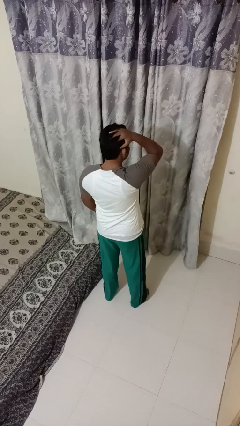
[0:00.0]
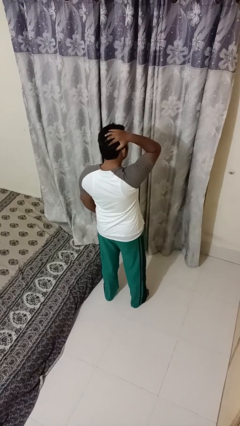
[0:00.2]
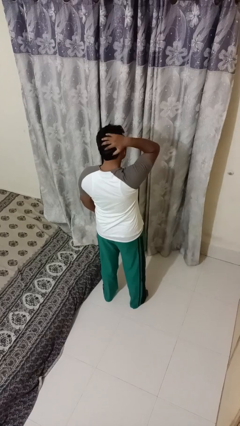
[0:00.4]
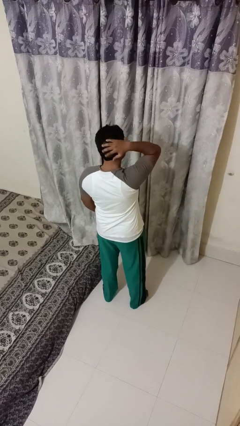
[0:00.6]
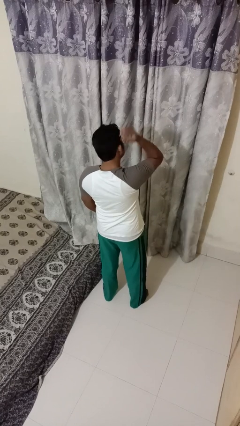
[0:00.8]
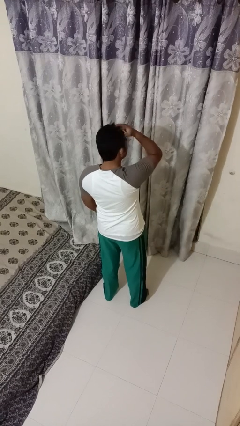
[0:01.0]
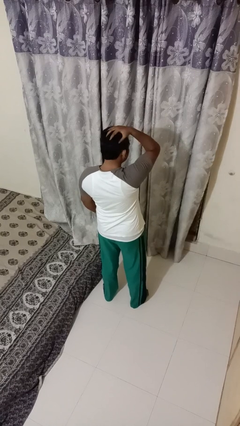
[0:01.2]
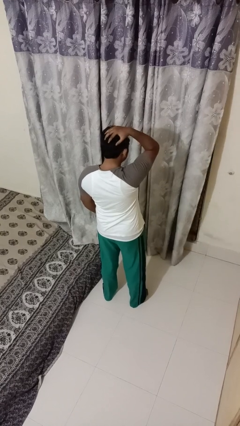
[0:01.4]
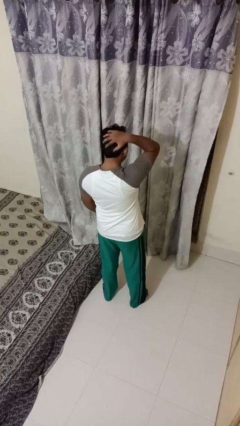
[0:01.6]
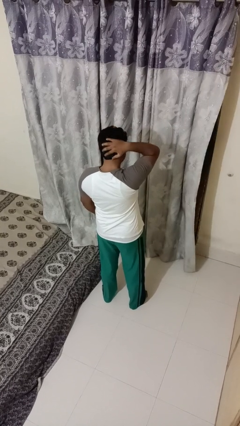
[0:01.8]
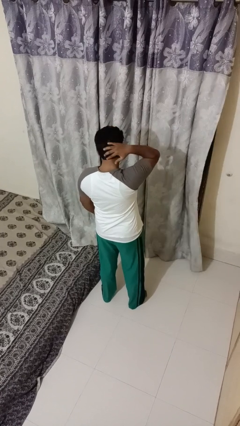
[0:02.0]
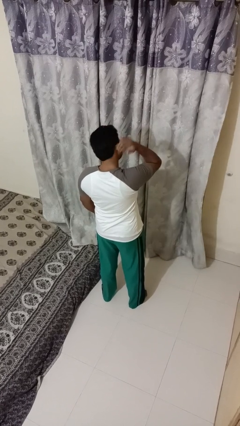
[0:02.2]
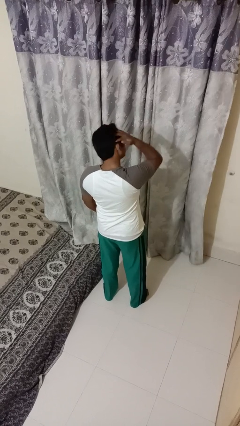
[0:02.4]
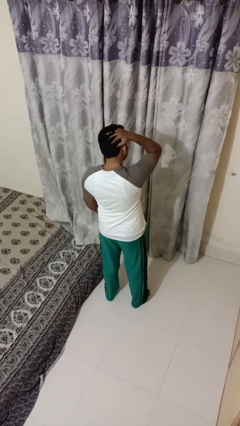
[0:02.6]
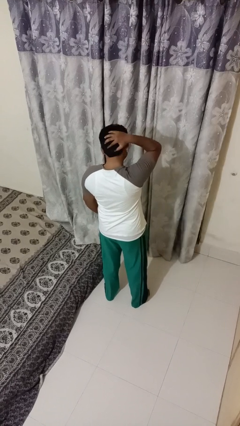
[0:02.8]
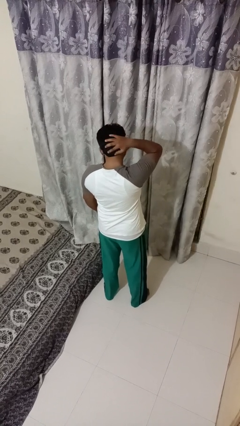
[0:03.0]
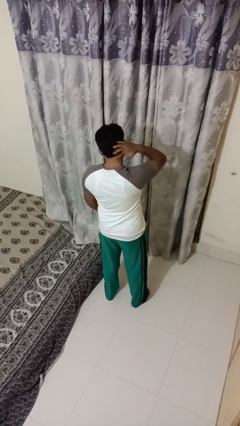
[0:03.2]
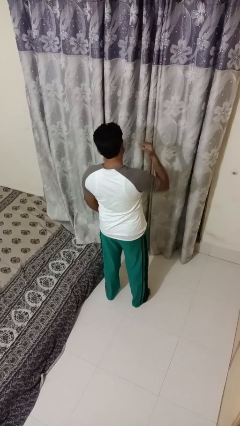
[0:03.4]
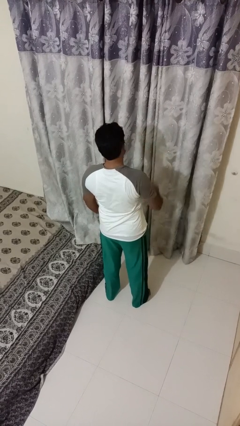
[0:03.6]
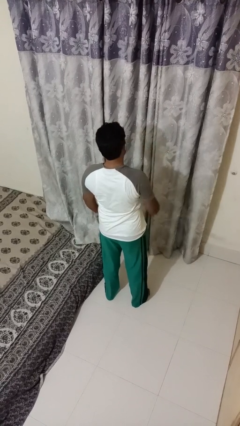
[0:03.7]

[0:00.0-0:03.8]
person strokes hair

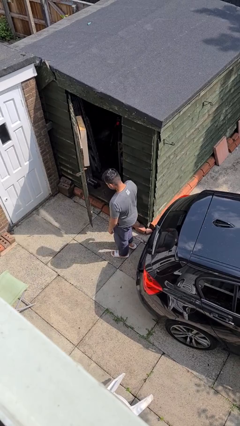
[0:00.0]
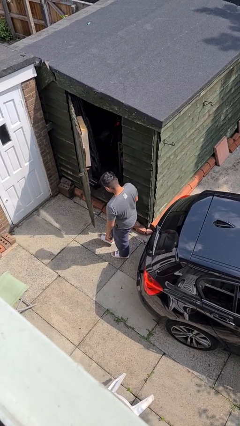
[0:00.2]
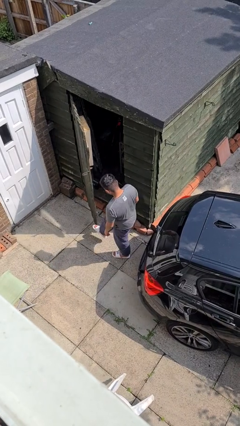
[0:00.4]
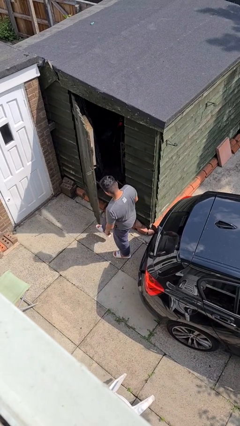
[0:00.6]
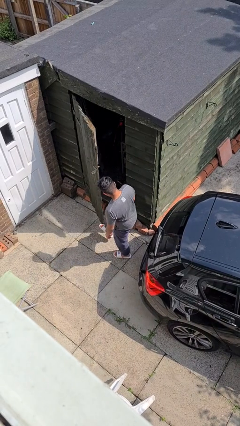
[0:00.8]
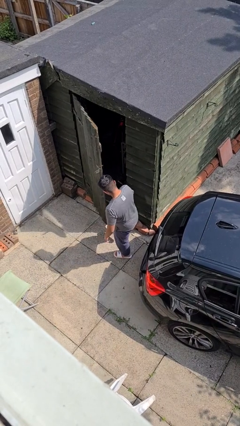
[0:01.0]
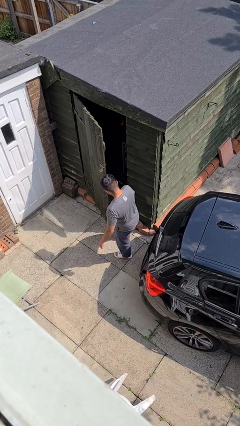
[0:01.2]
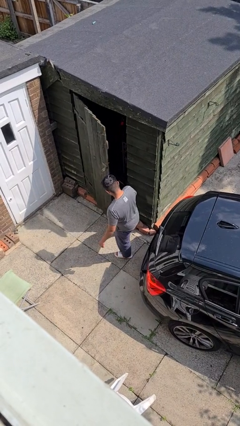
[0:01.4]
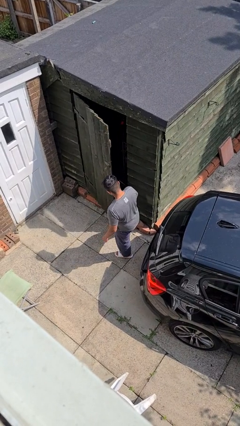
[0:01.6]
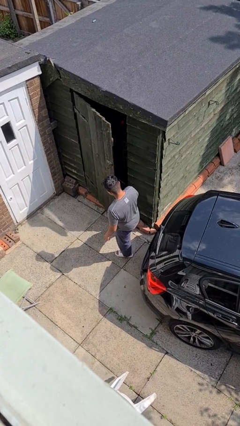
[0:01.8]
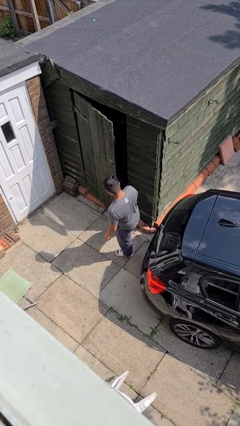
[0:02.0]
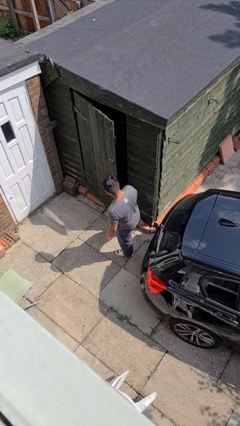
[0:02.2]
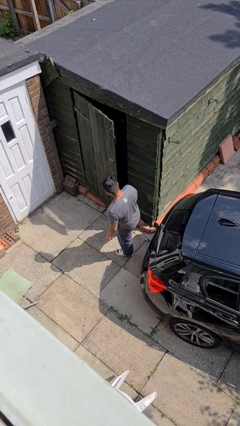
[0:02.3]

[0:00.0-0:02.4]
person closes door with foot

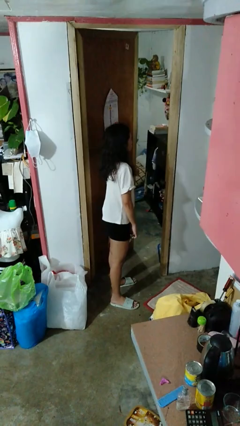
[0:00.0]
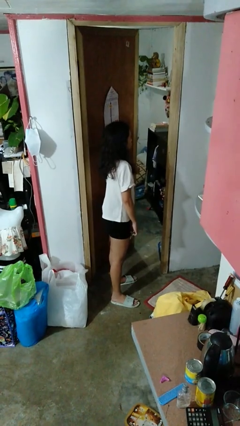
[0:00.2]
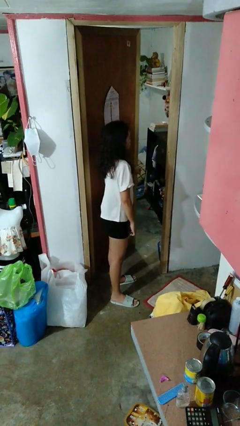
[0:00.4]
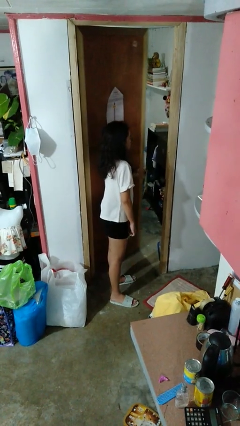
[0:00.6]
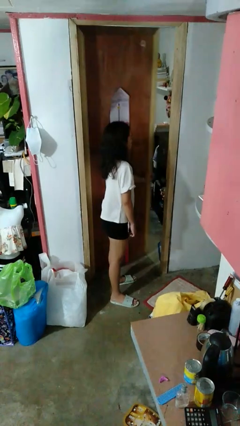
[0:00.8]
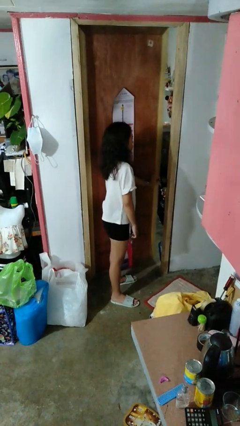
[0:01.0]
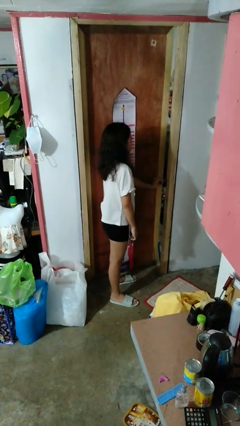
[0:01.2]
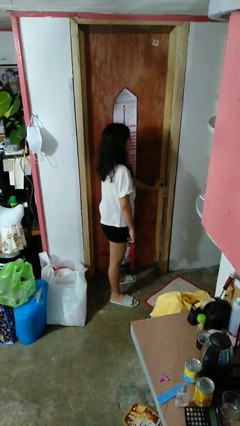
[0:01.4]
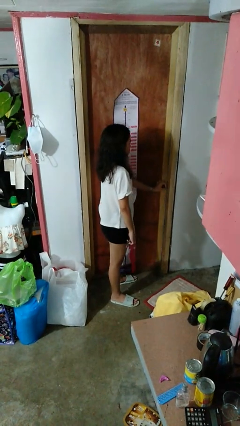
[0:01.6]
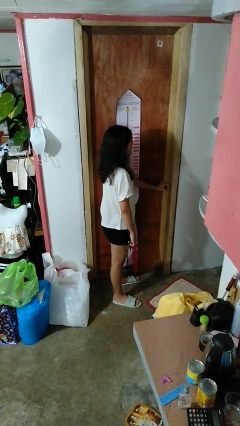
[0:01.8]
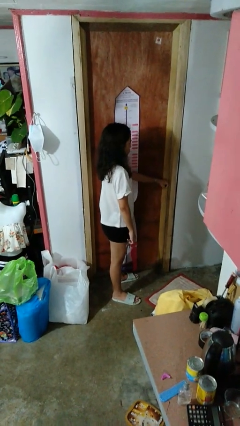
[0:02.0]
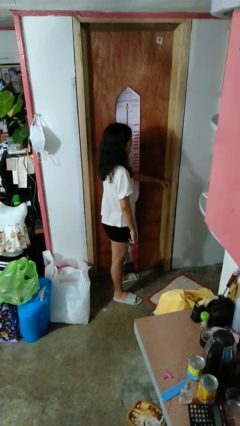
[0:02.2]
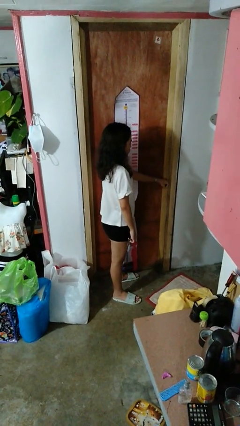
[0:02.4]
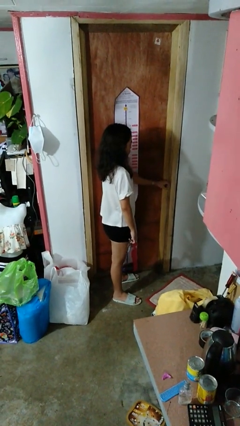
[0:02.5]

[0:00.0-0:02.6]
person closes facility door

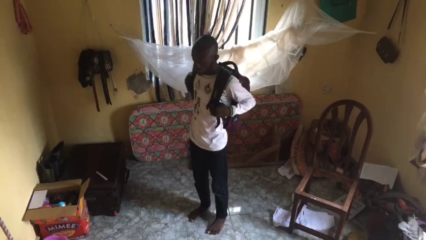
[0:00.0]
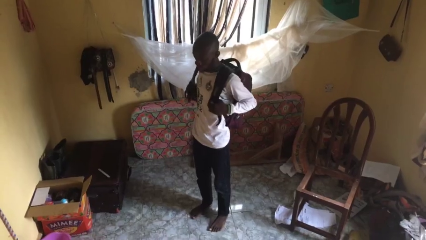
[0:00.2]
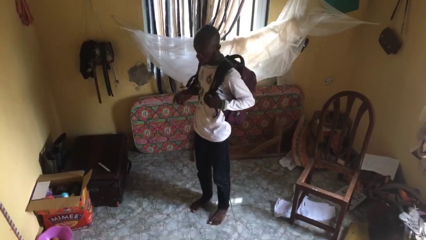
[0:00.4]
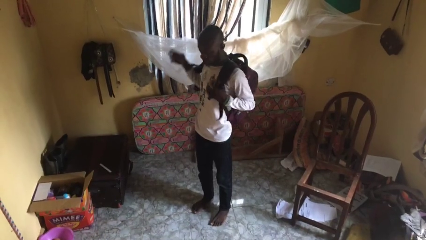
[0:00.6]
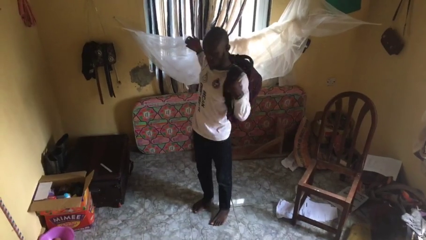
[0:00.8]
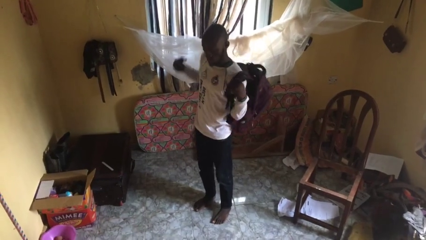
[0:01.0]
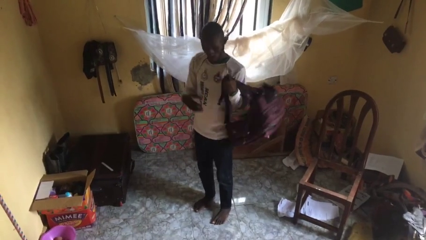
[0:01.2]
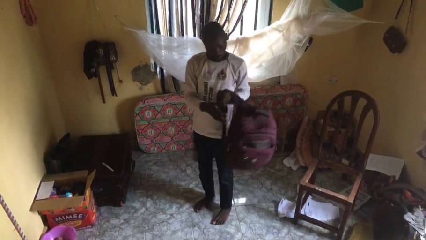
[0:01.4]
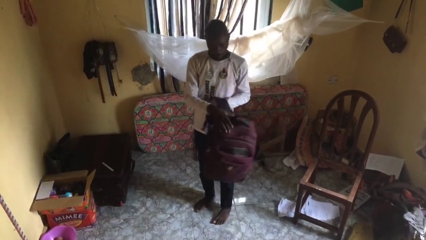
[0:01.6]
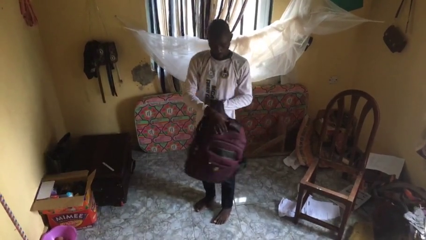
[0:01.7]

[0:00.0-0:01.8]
person takes off backpack

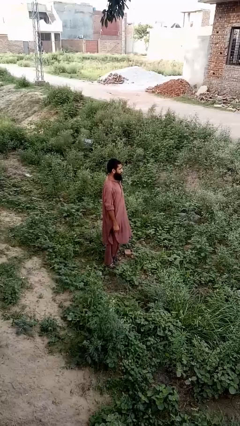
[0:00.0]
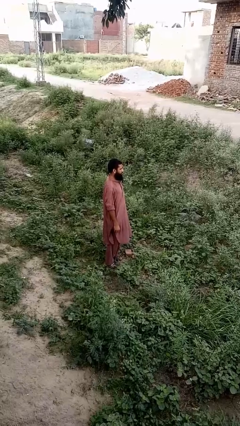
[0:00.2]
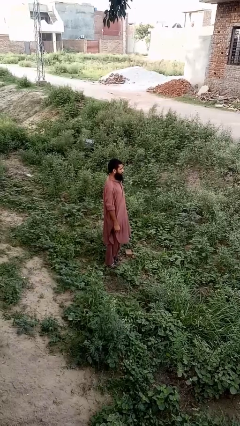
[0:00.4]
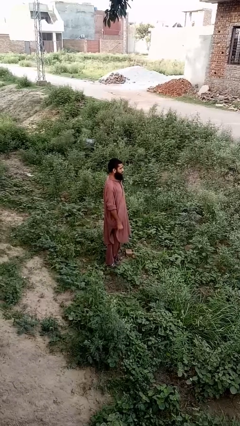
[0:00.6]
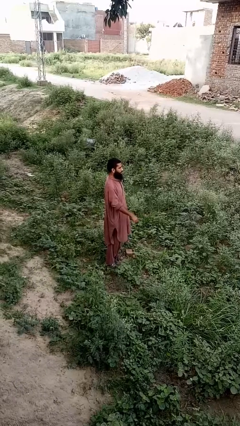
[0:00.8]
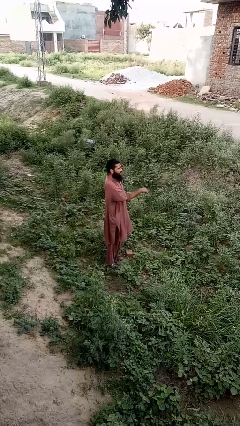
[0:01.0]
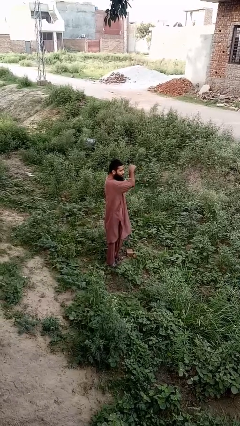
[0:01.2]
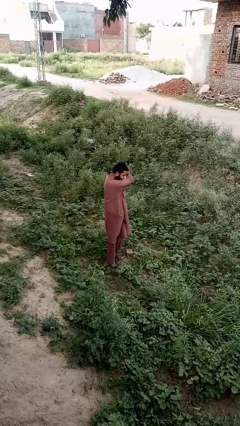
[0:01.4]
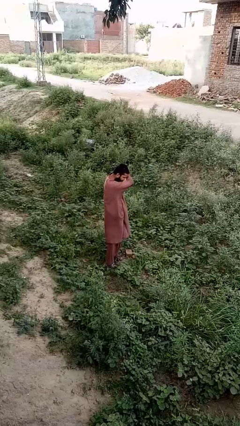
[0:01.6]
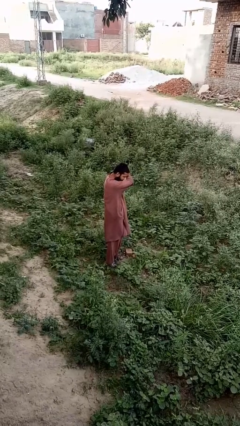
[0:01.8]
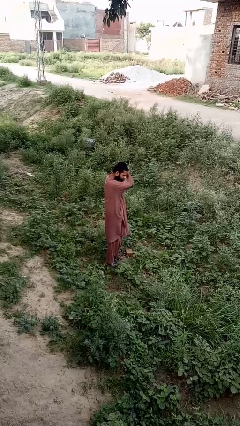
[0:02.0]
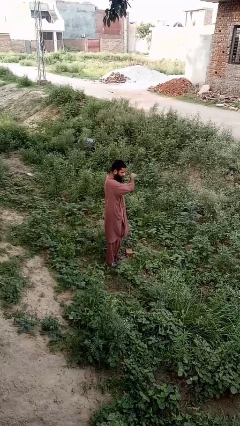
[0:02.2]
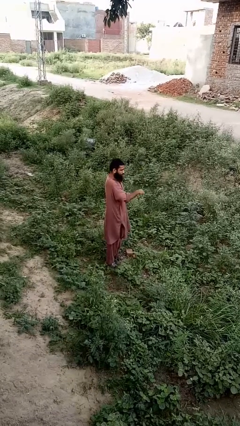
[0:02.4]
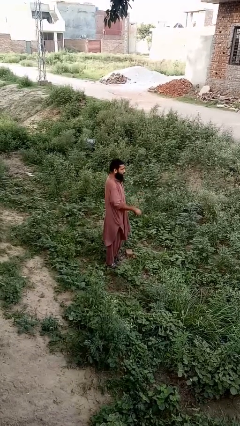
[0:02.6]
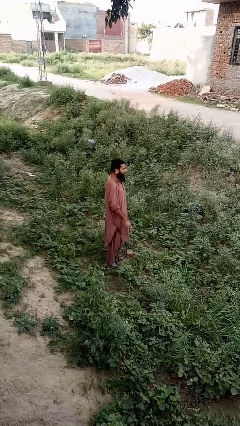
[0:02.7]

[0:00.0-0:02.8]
person sneezes into arm

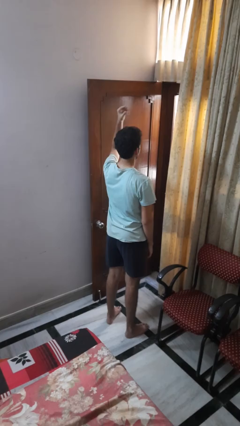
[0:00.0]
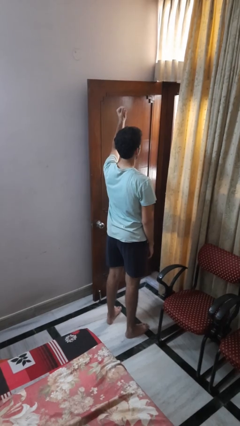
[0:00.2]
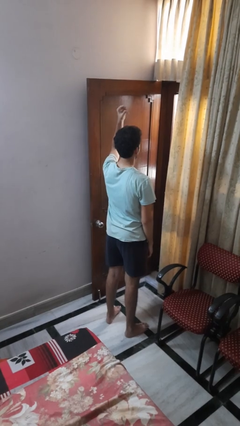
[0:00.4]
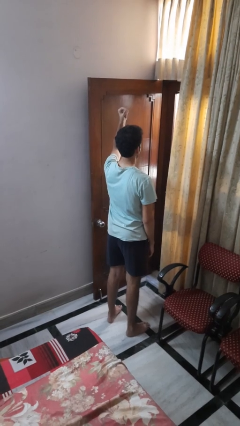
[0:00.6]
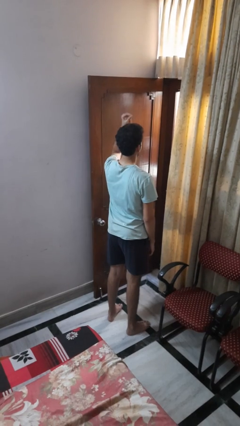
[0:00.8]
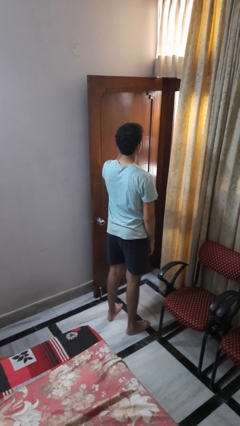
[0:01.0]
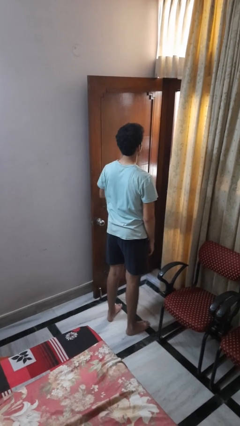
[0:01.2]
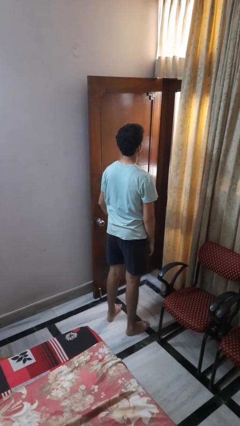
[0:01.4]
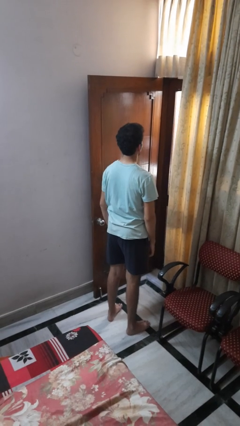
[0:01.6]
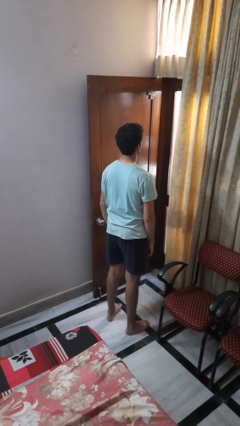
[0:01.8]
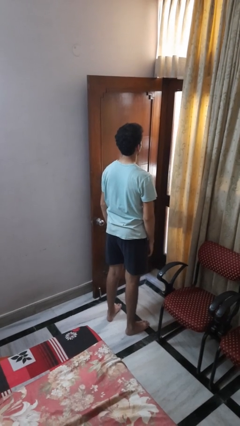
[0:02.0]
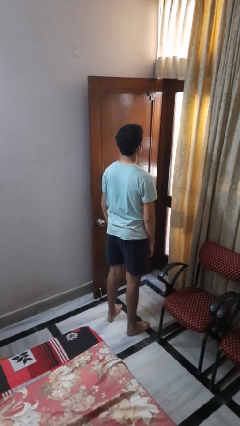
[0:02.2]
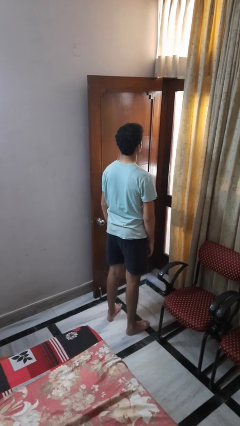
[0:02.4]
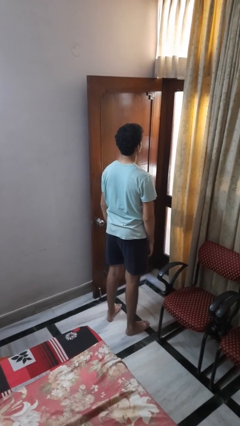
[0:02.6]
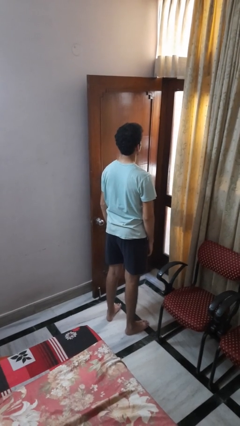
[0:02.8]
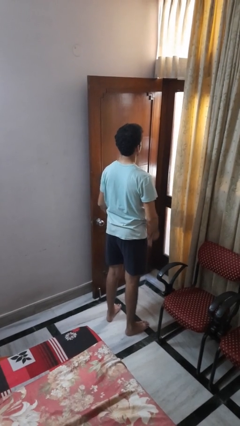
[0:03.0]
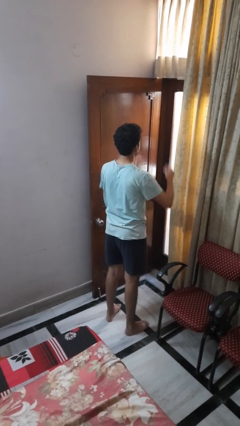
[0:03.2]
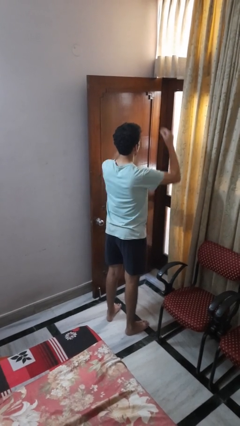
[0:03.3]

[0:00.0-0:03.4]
person snaps fingers

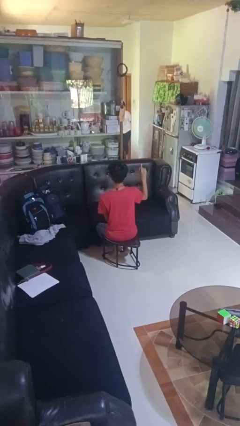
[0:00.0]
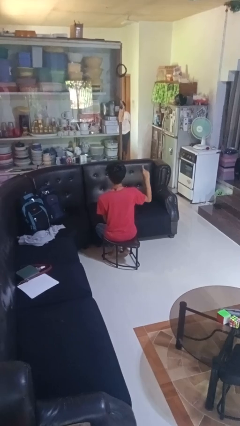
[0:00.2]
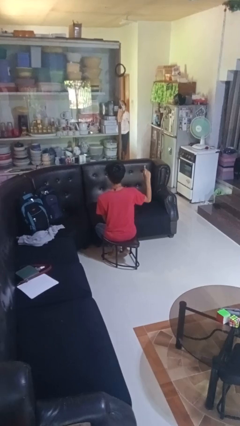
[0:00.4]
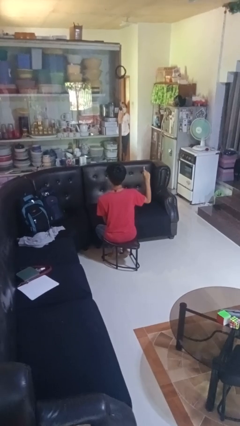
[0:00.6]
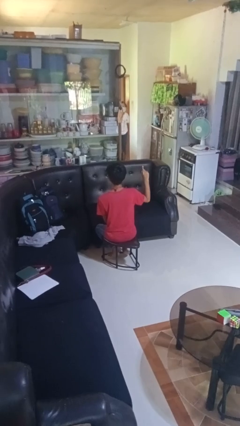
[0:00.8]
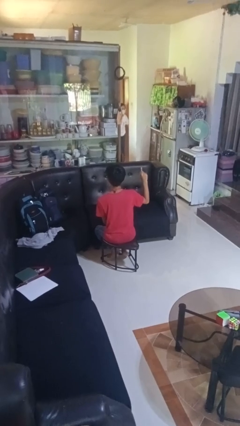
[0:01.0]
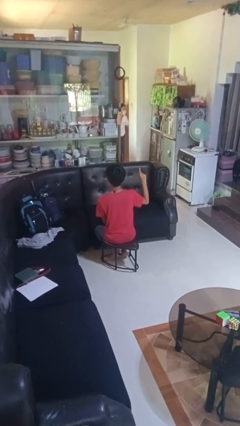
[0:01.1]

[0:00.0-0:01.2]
person gestures number one
